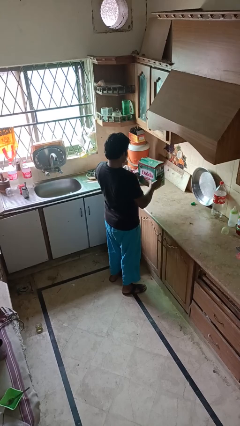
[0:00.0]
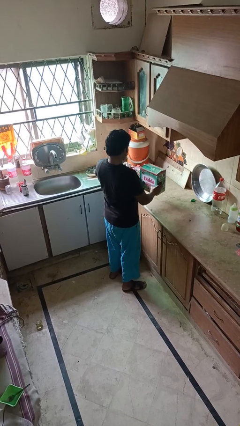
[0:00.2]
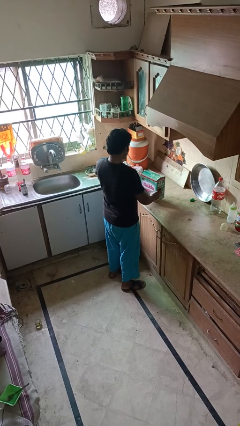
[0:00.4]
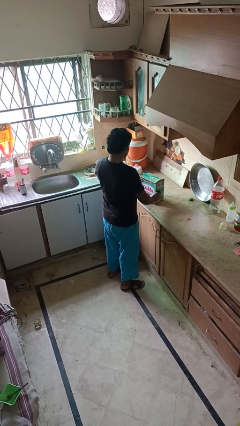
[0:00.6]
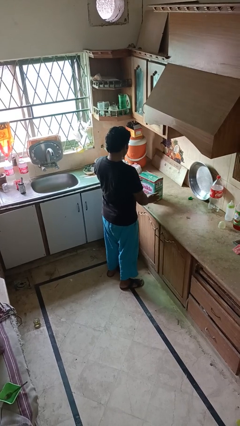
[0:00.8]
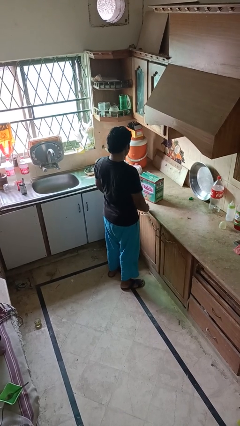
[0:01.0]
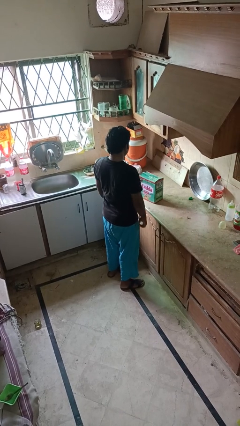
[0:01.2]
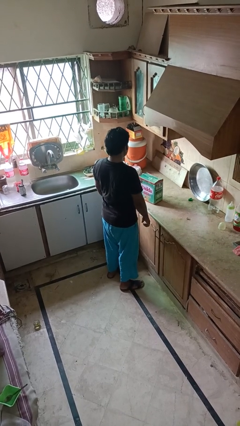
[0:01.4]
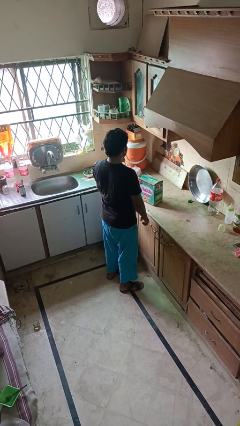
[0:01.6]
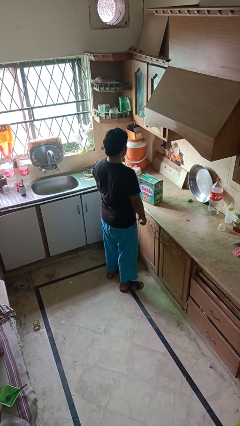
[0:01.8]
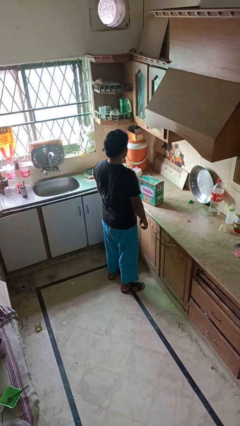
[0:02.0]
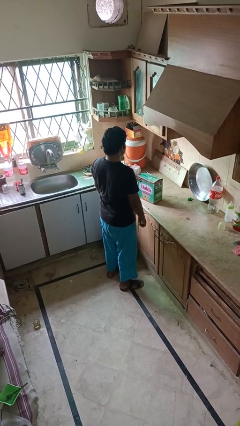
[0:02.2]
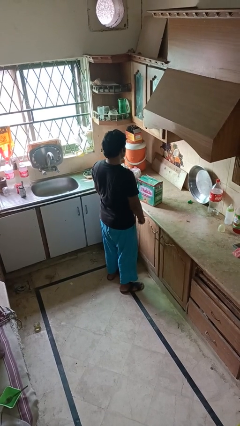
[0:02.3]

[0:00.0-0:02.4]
person puts down object on countertop

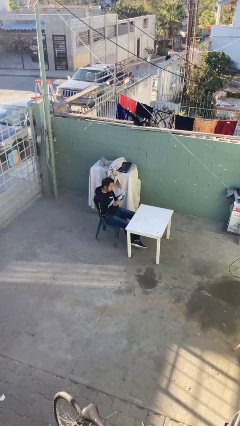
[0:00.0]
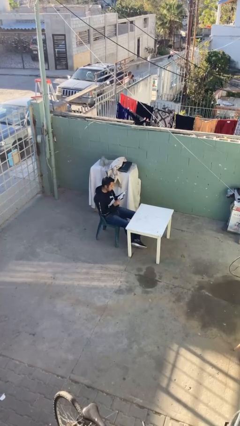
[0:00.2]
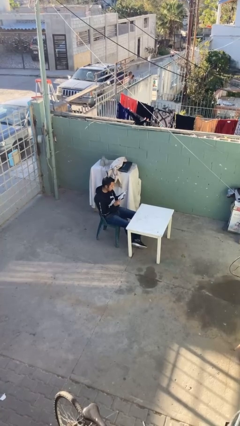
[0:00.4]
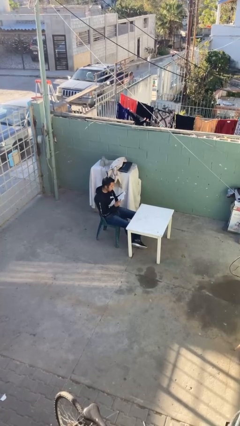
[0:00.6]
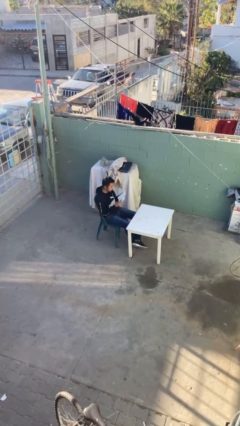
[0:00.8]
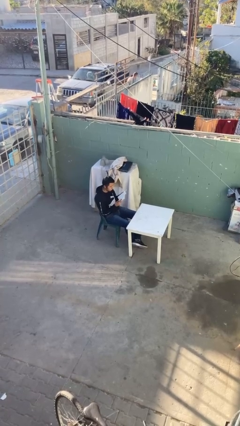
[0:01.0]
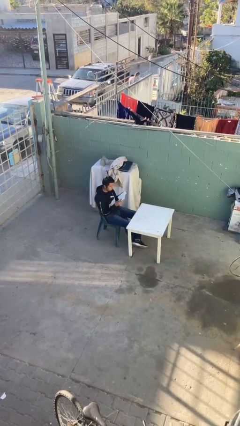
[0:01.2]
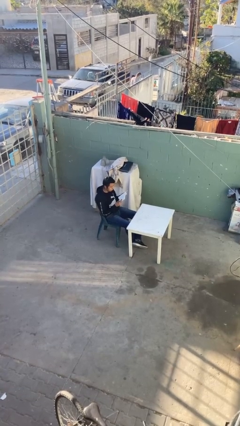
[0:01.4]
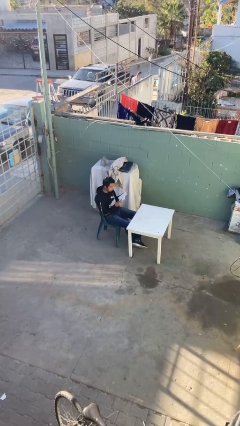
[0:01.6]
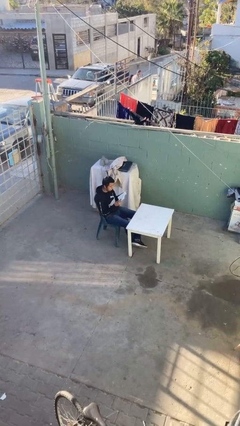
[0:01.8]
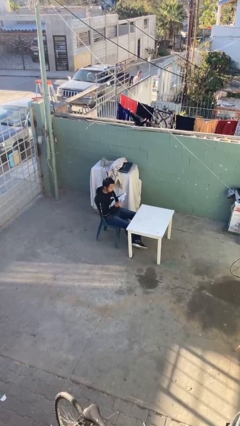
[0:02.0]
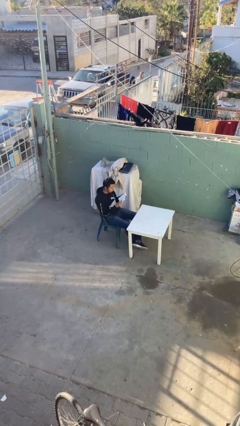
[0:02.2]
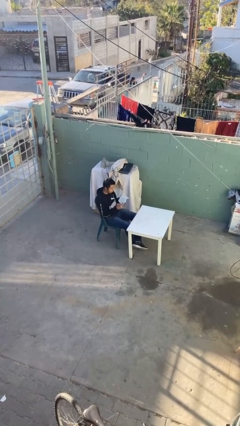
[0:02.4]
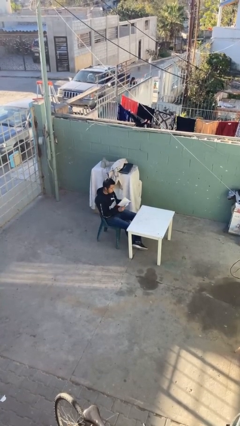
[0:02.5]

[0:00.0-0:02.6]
person reads document

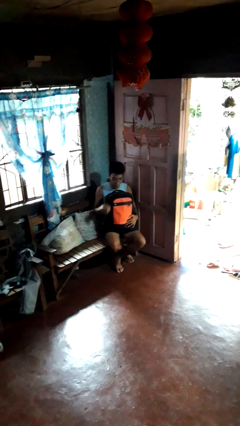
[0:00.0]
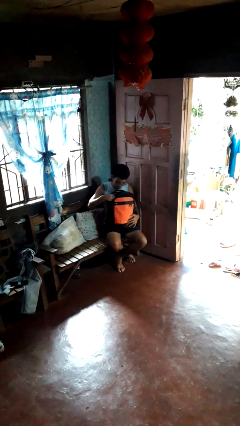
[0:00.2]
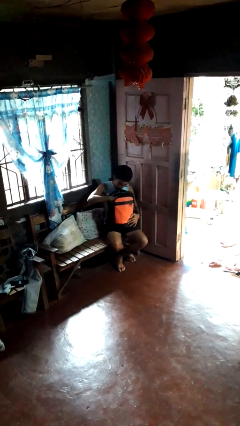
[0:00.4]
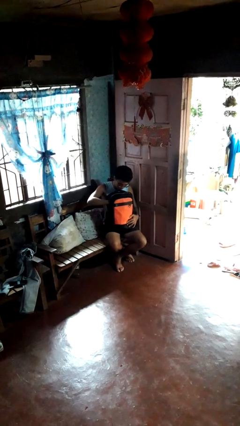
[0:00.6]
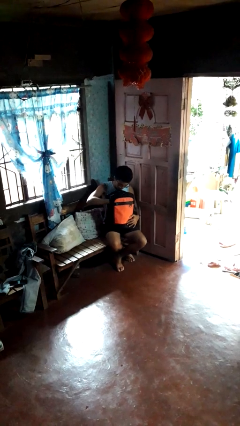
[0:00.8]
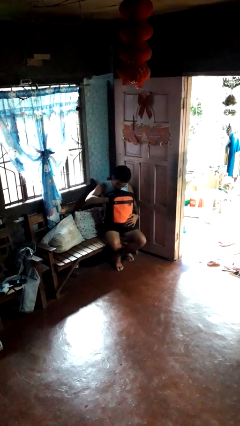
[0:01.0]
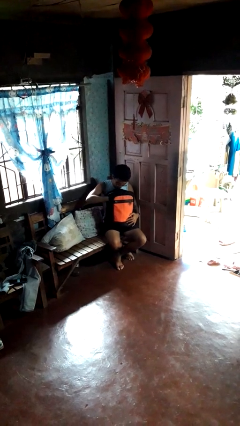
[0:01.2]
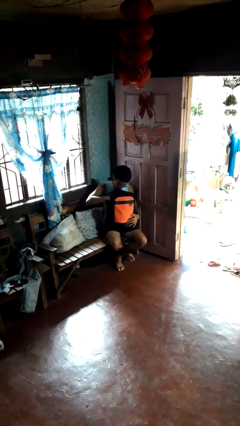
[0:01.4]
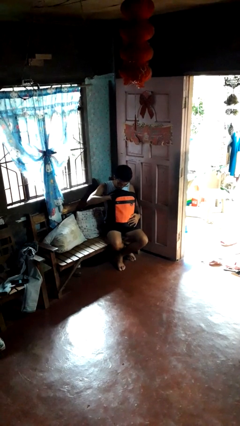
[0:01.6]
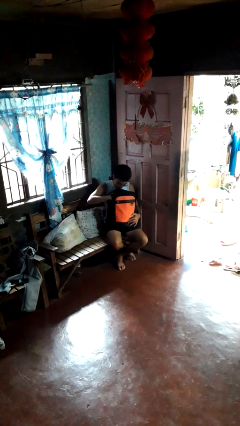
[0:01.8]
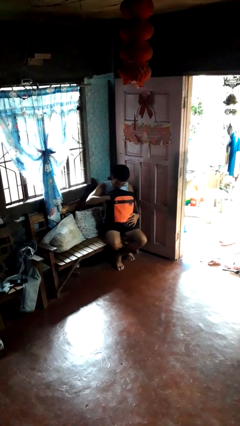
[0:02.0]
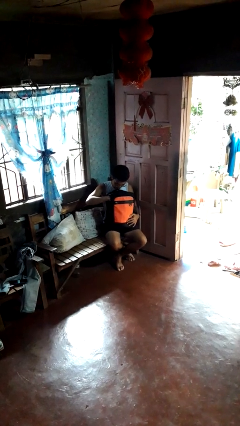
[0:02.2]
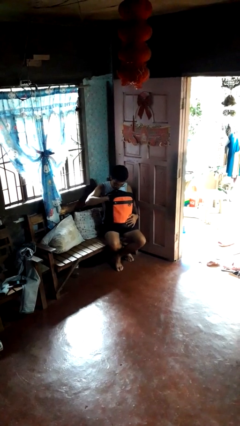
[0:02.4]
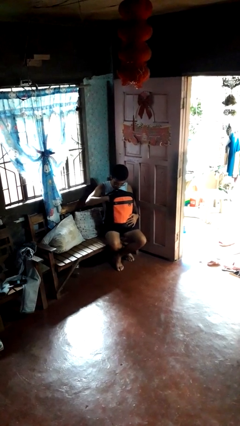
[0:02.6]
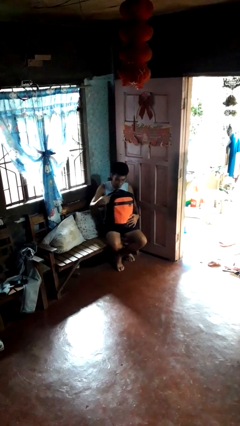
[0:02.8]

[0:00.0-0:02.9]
person searches in bag

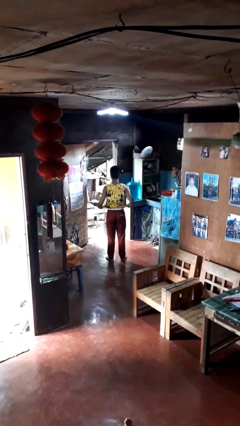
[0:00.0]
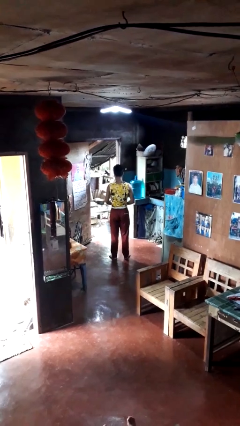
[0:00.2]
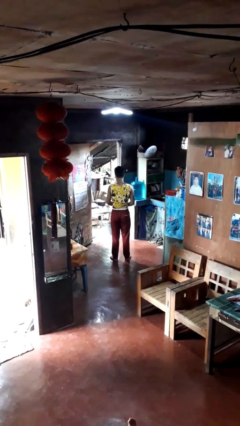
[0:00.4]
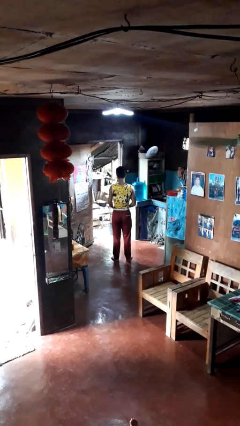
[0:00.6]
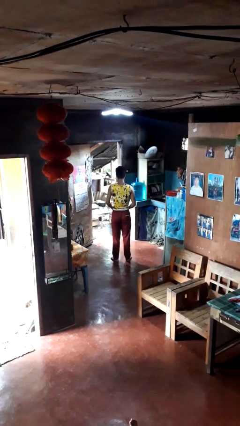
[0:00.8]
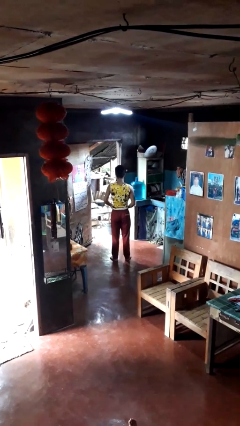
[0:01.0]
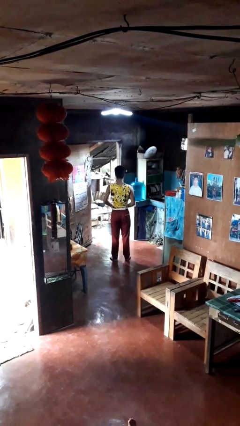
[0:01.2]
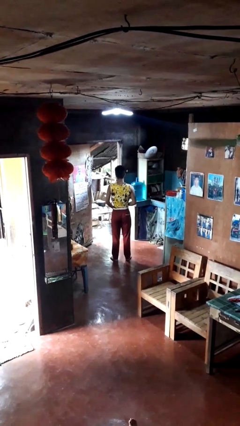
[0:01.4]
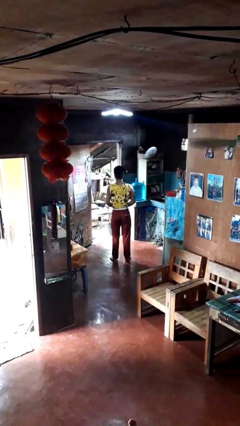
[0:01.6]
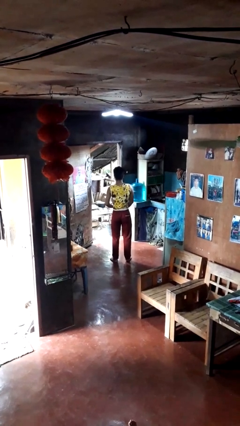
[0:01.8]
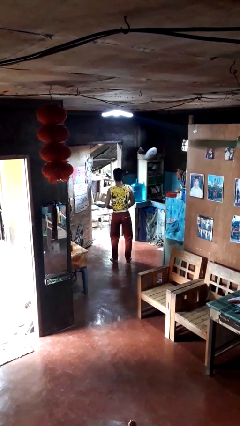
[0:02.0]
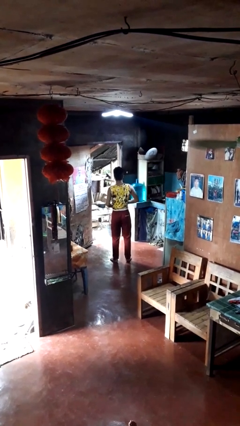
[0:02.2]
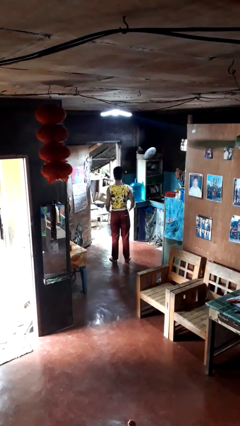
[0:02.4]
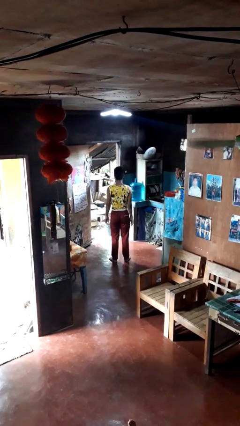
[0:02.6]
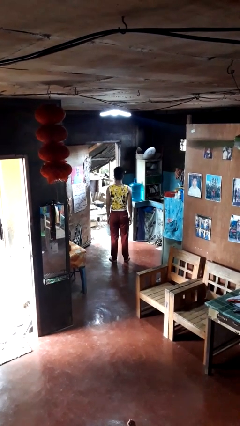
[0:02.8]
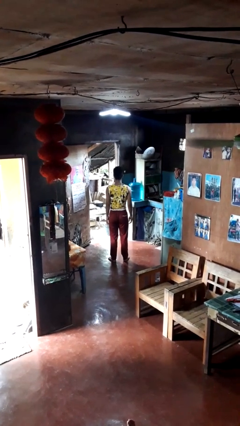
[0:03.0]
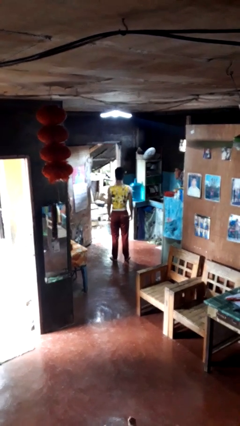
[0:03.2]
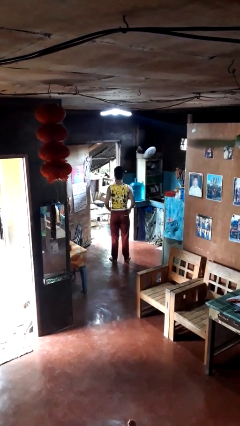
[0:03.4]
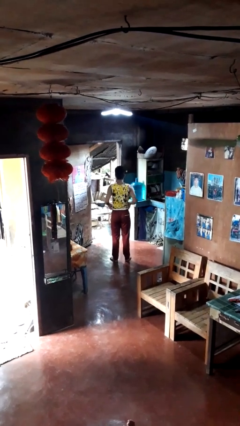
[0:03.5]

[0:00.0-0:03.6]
person tucks in shirt

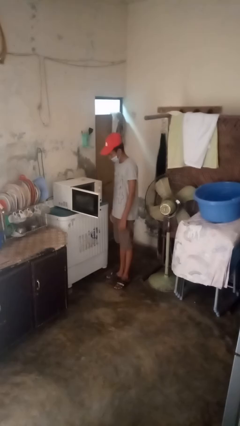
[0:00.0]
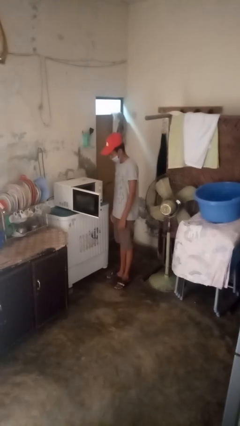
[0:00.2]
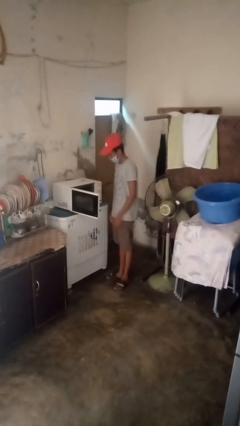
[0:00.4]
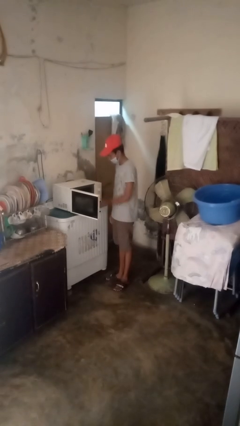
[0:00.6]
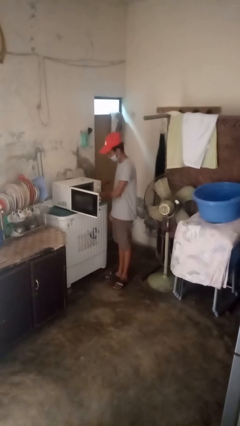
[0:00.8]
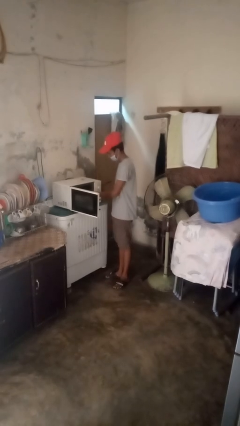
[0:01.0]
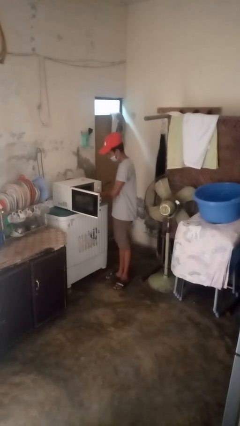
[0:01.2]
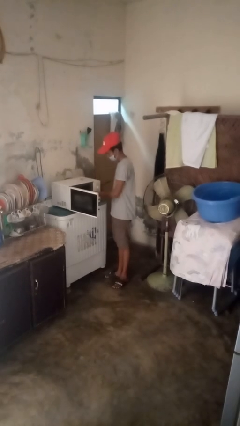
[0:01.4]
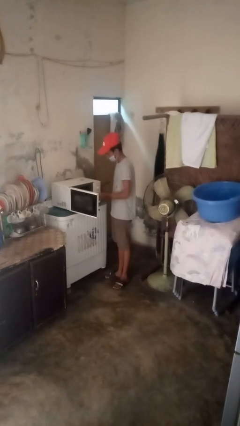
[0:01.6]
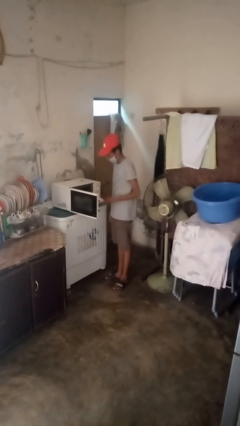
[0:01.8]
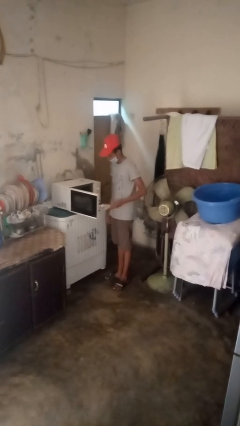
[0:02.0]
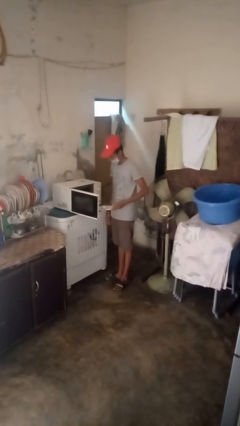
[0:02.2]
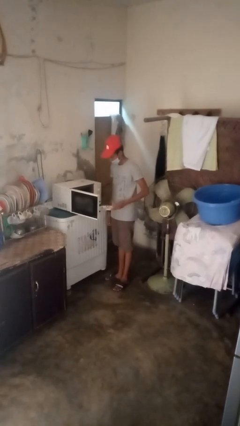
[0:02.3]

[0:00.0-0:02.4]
person takes object from microwave

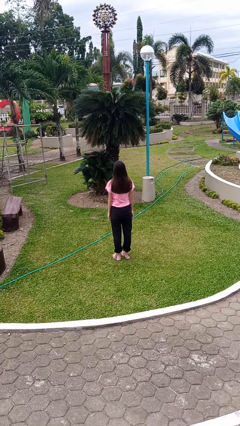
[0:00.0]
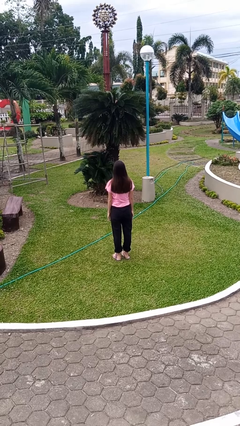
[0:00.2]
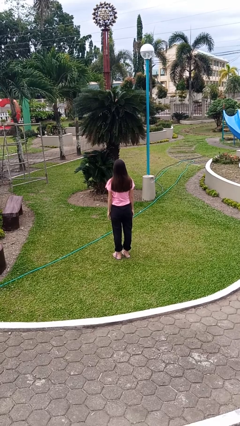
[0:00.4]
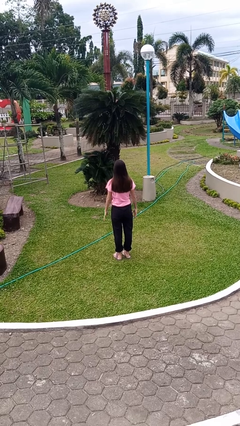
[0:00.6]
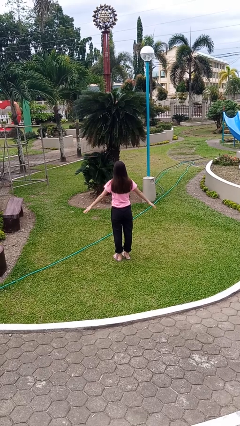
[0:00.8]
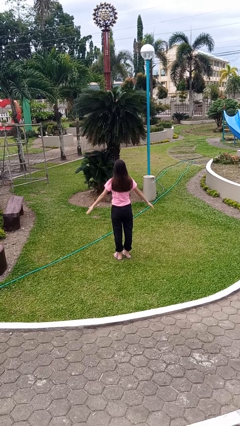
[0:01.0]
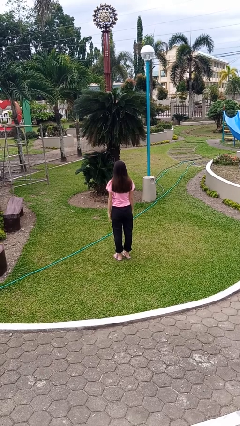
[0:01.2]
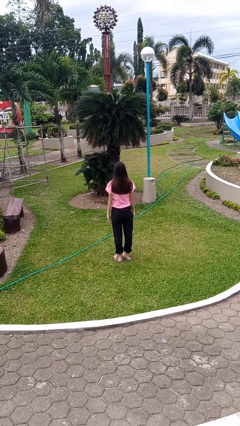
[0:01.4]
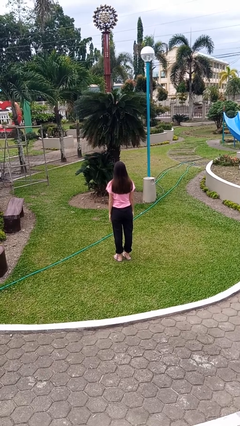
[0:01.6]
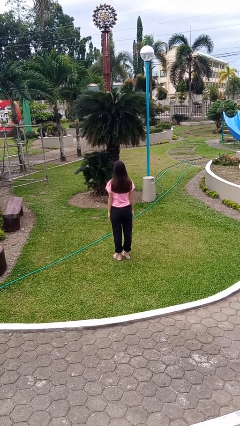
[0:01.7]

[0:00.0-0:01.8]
person slaps hands on thighs

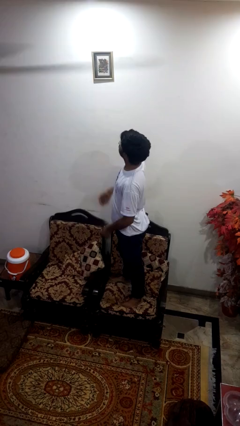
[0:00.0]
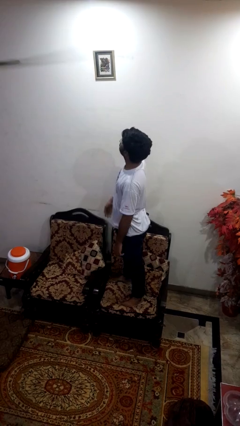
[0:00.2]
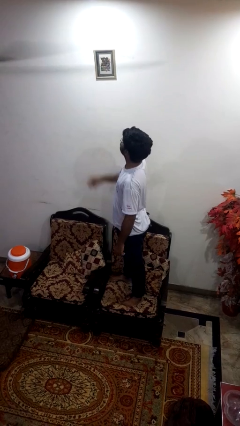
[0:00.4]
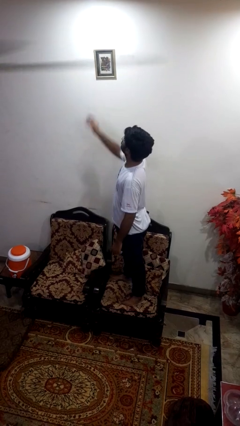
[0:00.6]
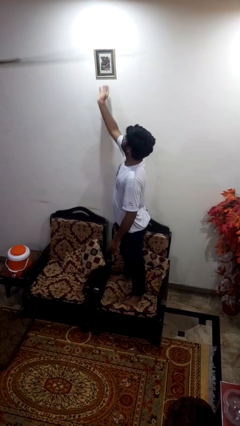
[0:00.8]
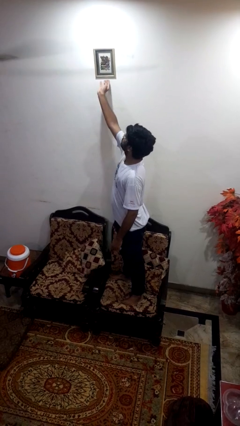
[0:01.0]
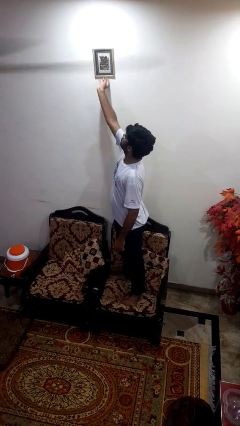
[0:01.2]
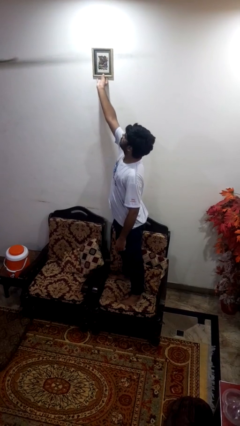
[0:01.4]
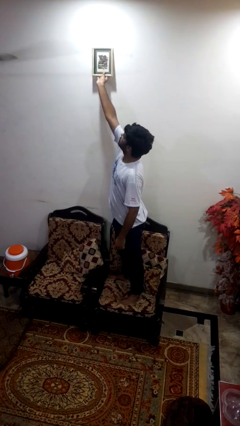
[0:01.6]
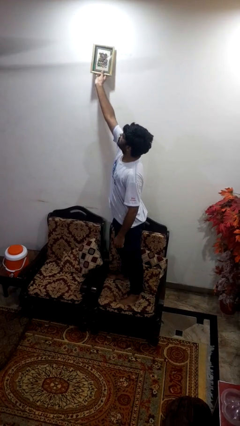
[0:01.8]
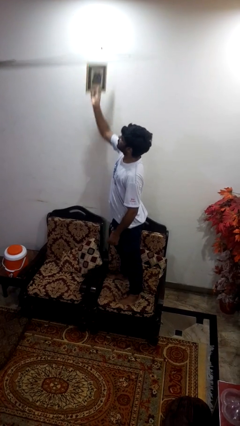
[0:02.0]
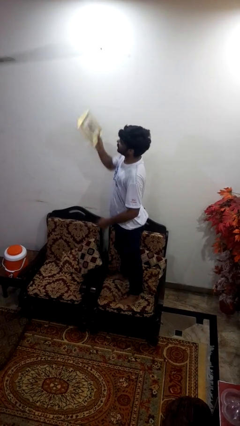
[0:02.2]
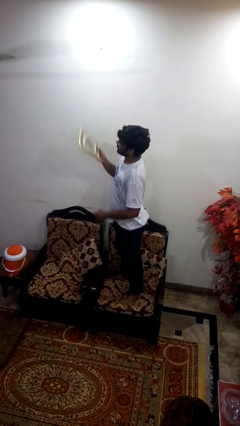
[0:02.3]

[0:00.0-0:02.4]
person takes down picture frame
